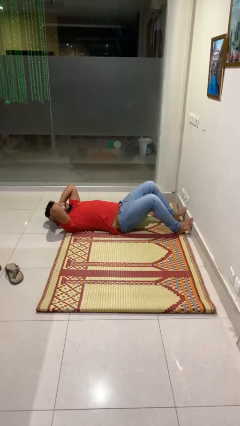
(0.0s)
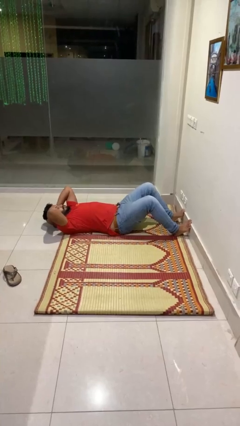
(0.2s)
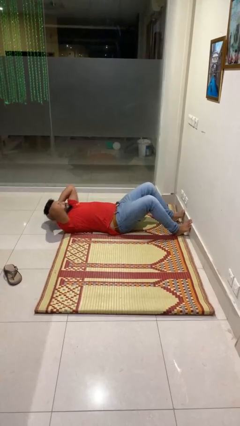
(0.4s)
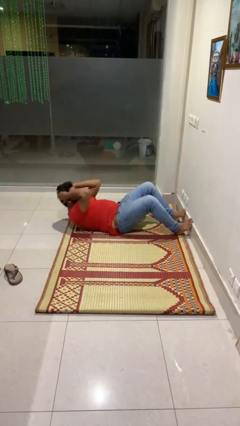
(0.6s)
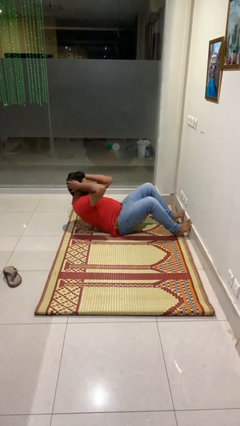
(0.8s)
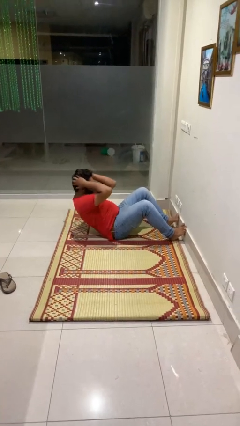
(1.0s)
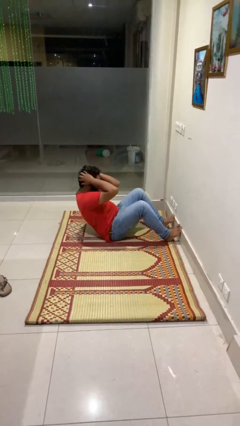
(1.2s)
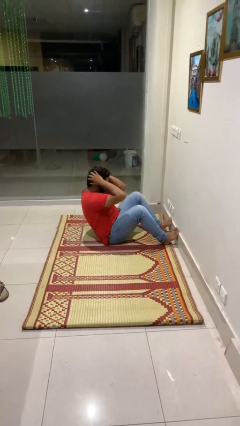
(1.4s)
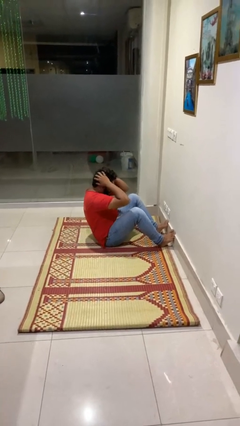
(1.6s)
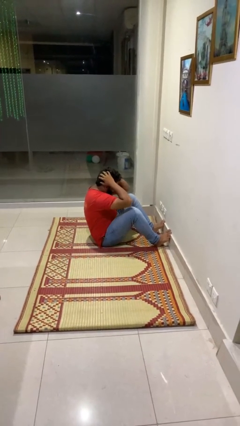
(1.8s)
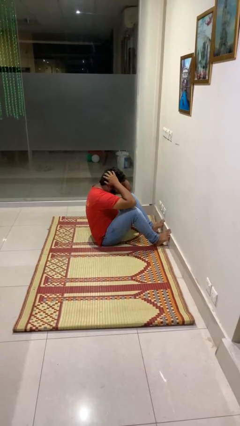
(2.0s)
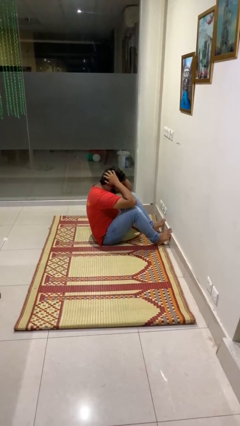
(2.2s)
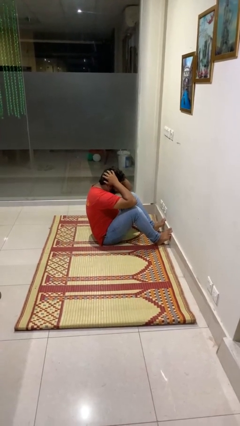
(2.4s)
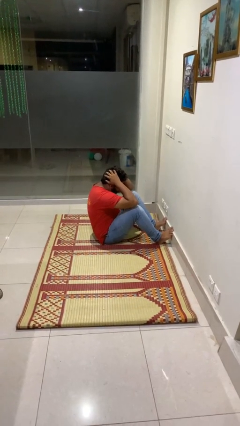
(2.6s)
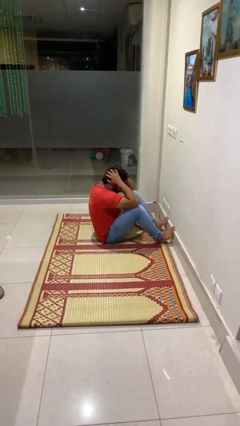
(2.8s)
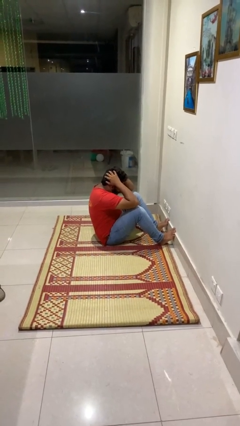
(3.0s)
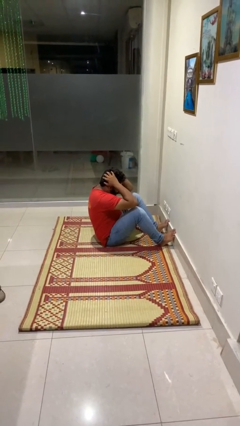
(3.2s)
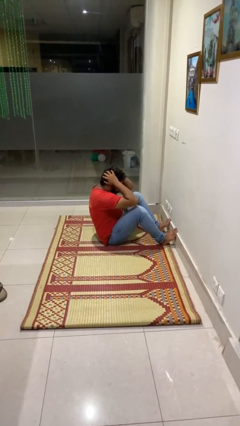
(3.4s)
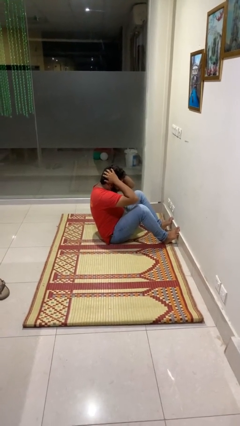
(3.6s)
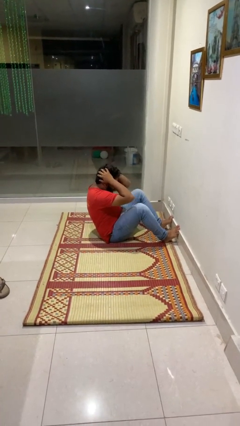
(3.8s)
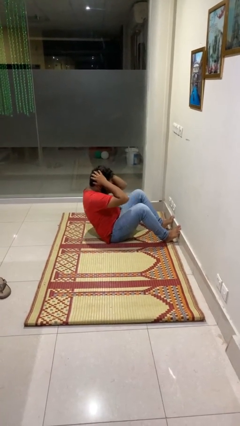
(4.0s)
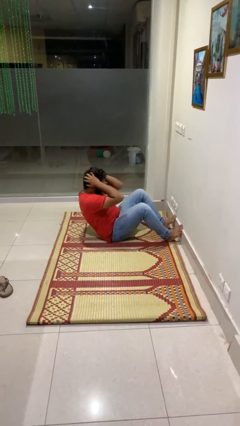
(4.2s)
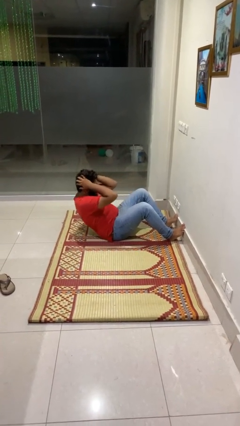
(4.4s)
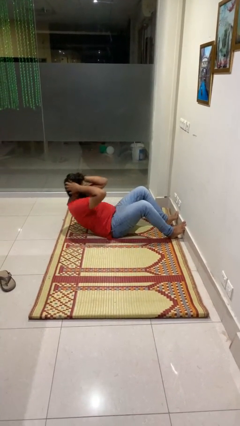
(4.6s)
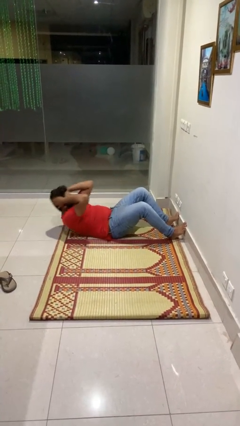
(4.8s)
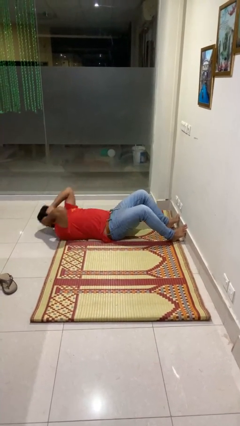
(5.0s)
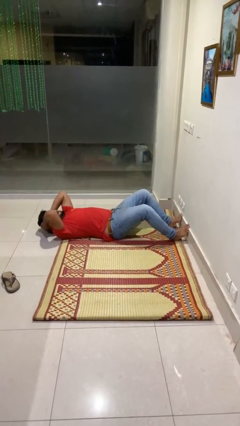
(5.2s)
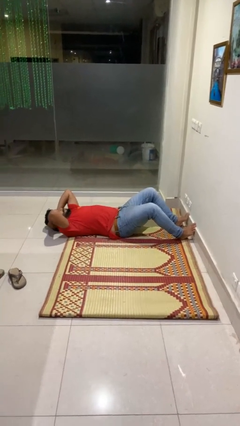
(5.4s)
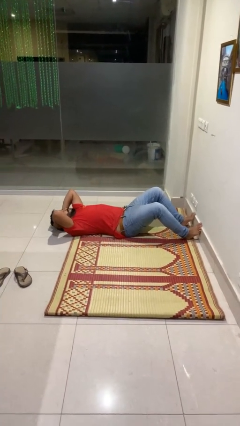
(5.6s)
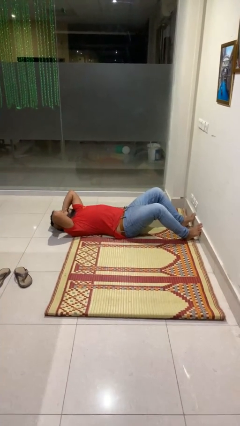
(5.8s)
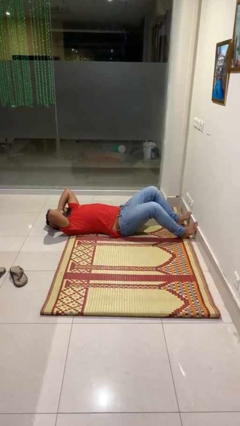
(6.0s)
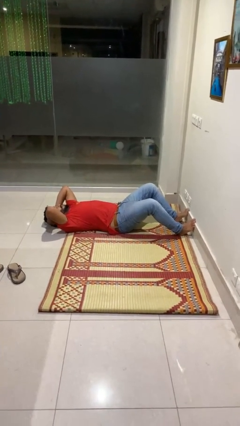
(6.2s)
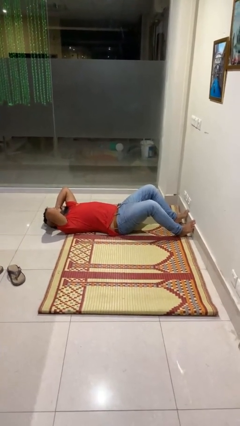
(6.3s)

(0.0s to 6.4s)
person exercises with situp

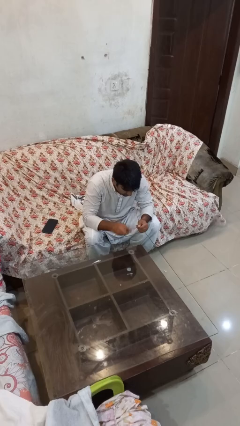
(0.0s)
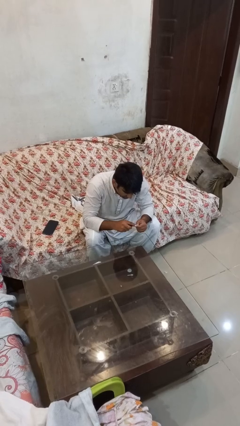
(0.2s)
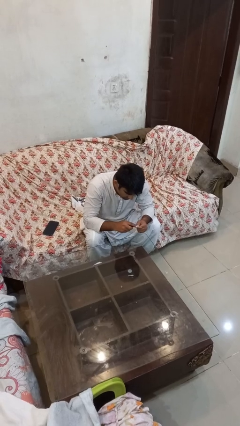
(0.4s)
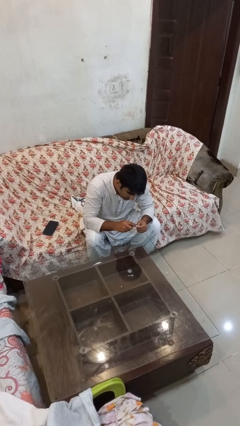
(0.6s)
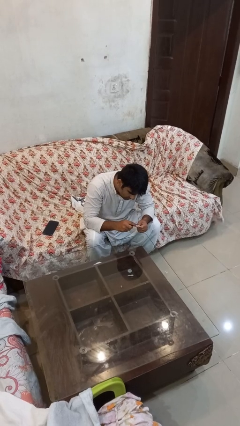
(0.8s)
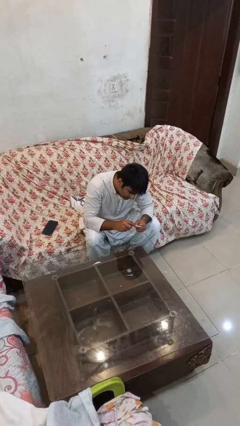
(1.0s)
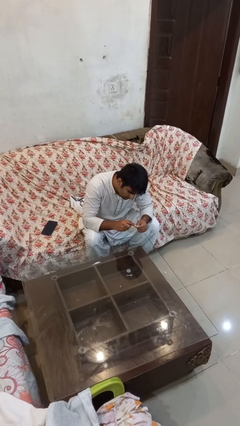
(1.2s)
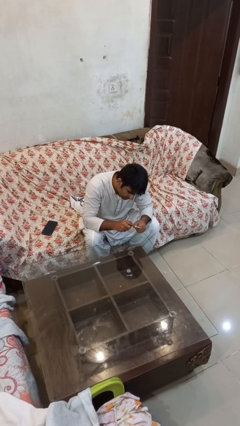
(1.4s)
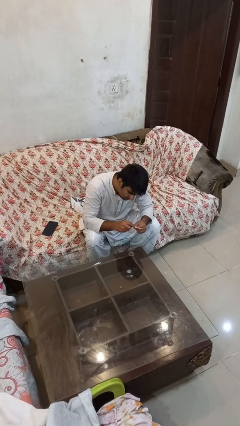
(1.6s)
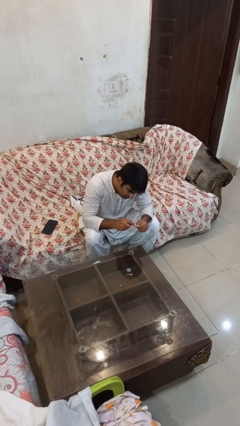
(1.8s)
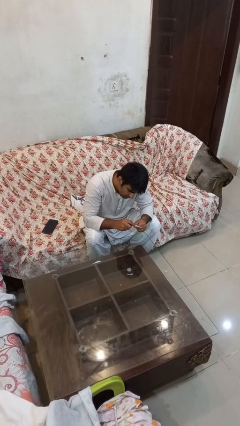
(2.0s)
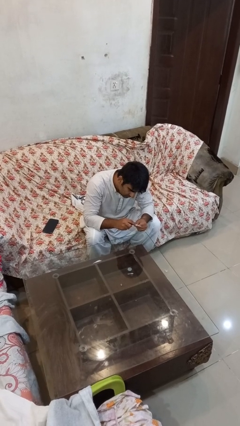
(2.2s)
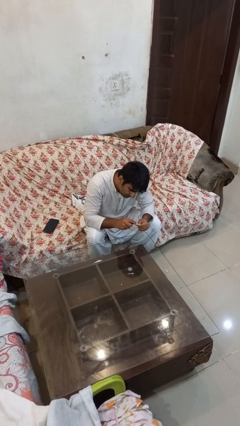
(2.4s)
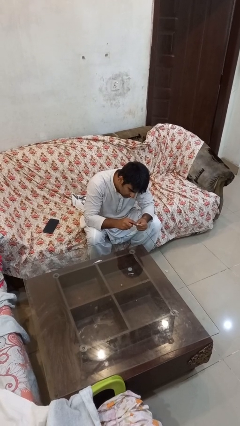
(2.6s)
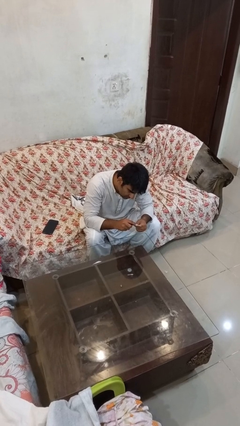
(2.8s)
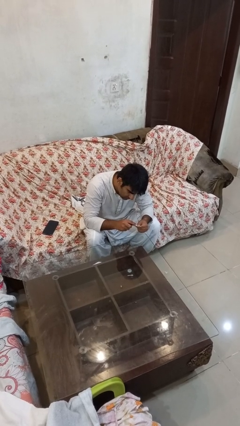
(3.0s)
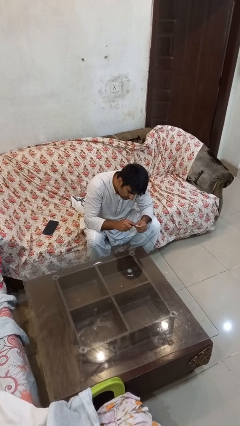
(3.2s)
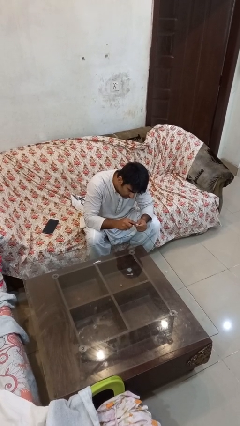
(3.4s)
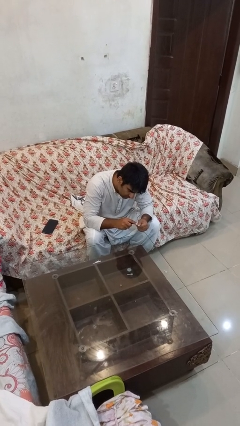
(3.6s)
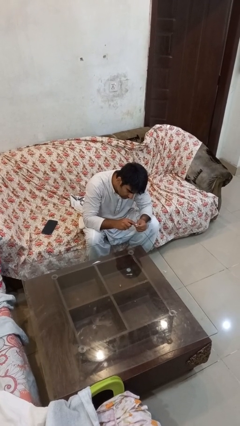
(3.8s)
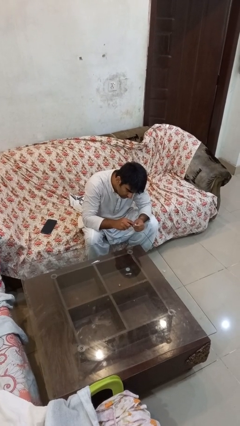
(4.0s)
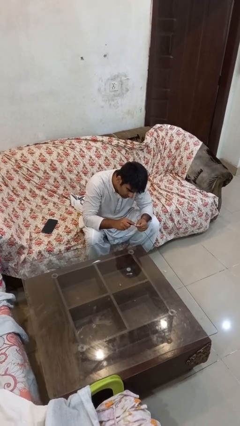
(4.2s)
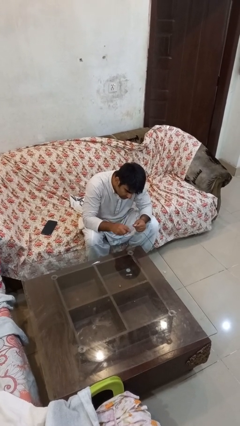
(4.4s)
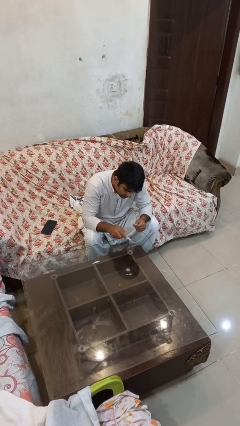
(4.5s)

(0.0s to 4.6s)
person files fingernails

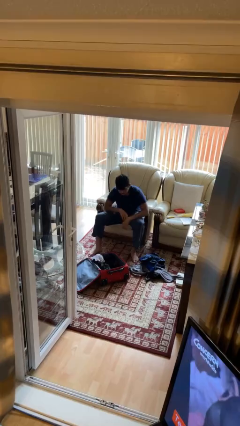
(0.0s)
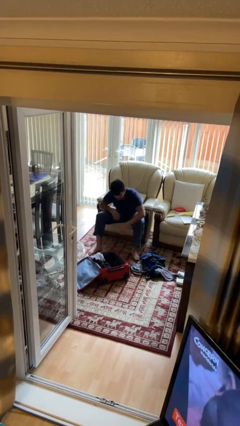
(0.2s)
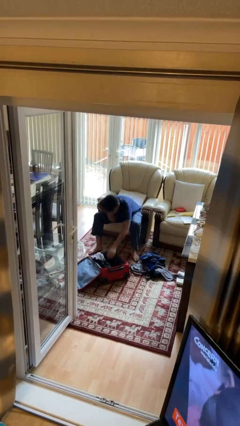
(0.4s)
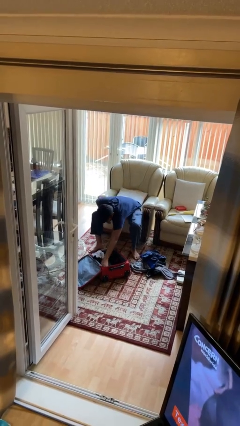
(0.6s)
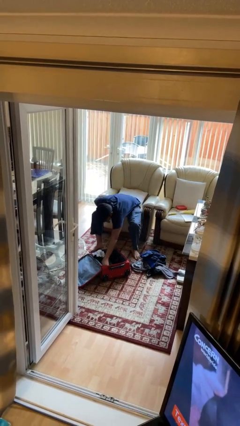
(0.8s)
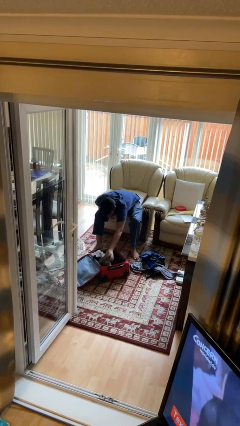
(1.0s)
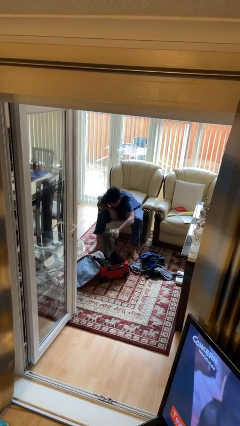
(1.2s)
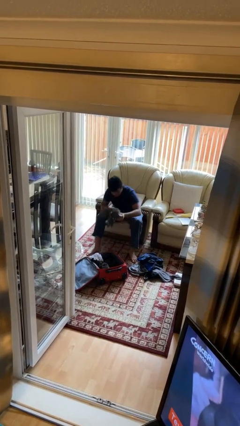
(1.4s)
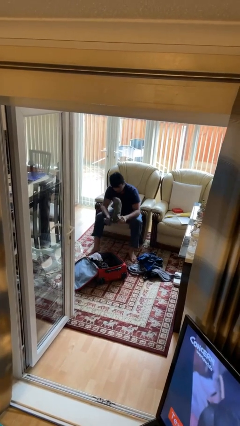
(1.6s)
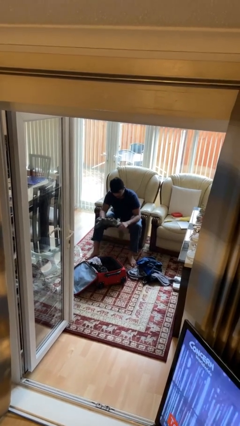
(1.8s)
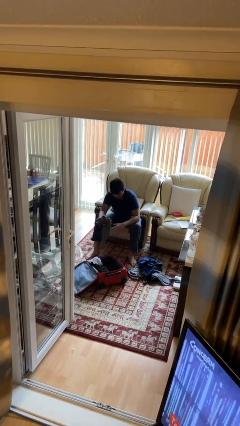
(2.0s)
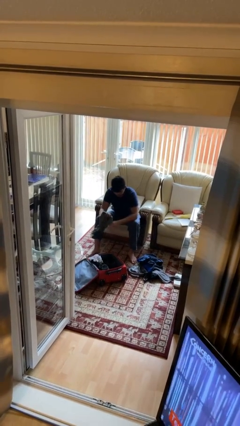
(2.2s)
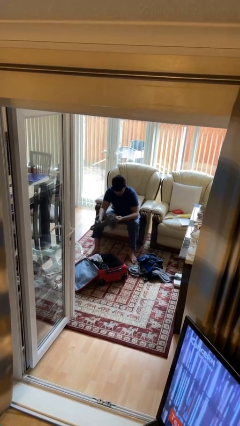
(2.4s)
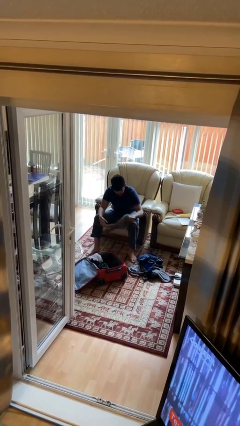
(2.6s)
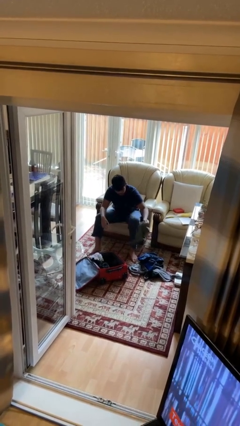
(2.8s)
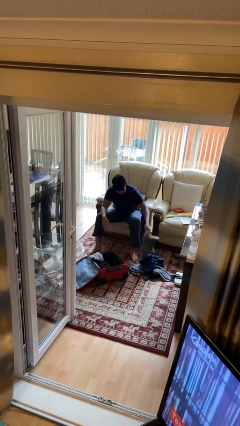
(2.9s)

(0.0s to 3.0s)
person unloads clothes from suitcase

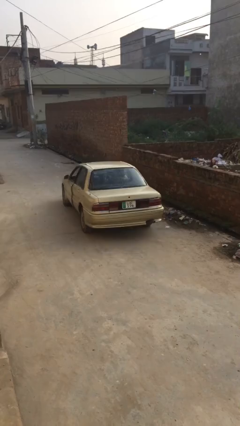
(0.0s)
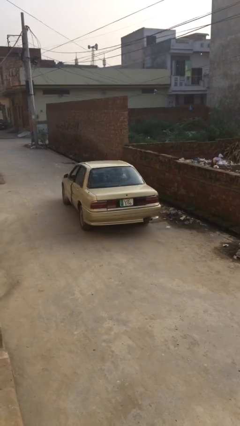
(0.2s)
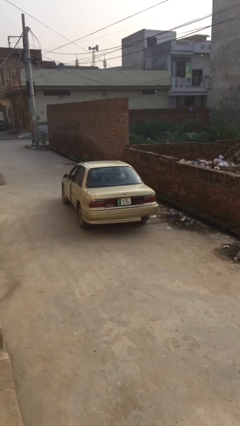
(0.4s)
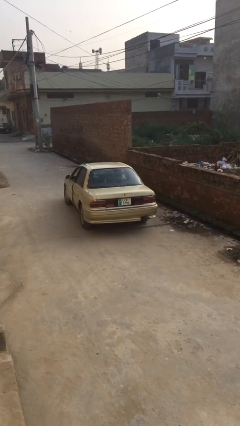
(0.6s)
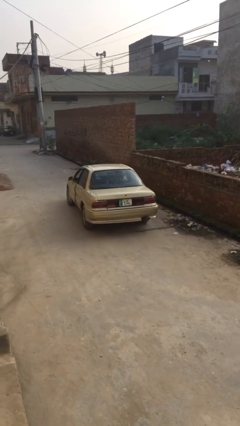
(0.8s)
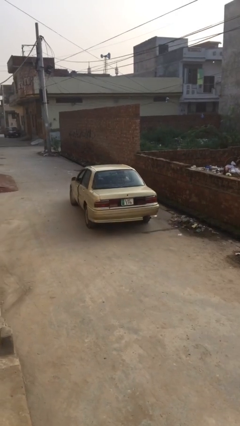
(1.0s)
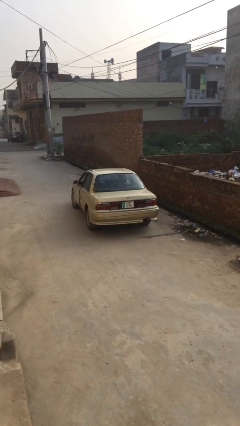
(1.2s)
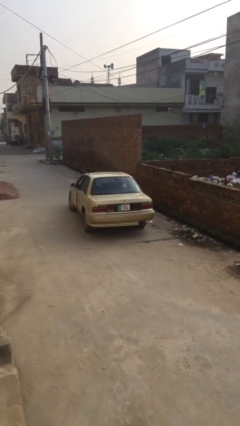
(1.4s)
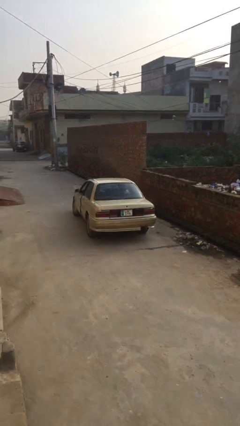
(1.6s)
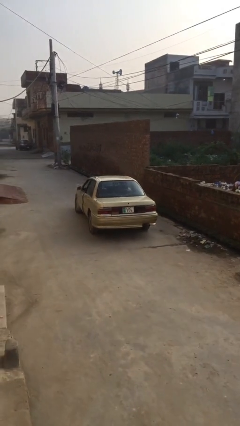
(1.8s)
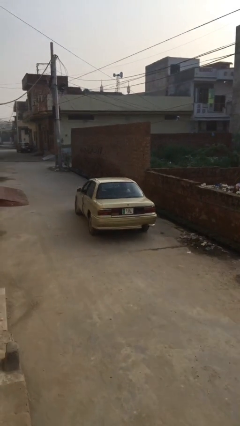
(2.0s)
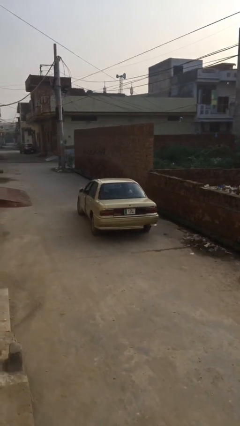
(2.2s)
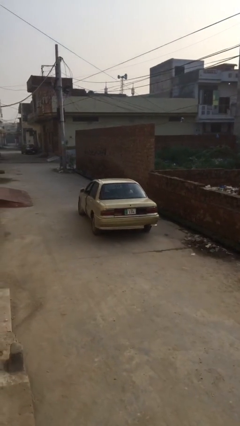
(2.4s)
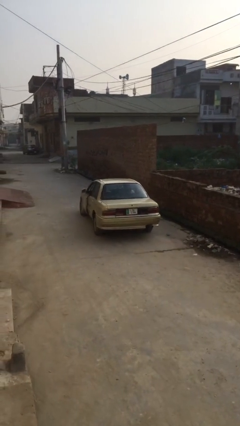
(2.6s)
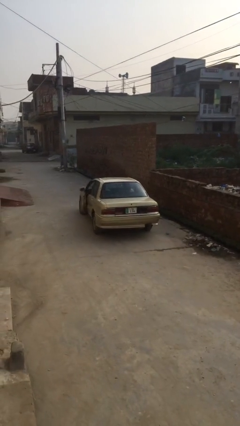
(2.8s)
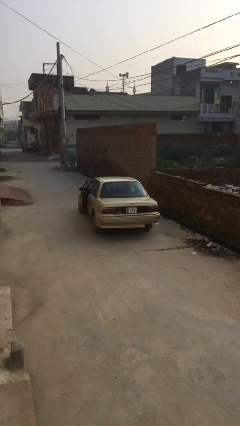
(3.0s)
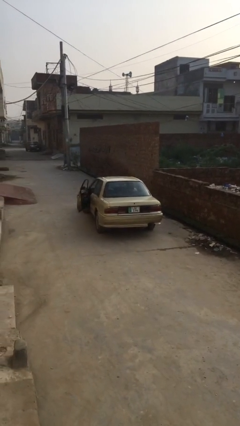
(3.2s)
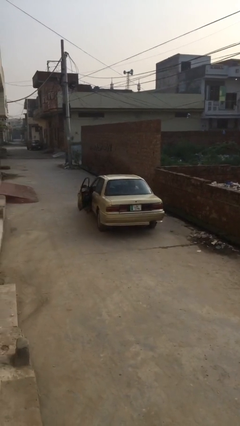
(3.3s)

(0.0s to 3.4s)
car drops off person

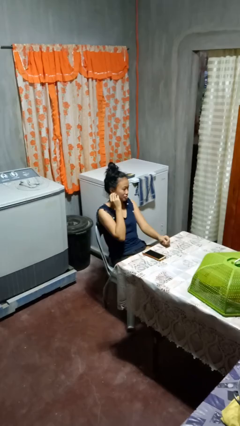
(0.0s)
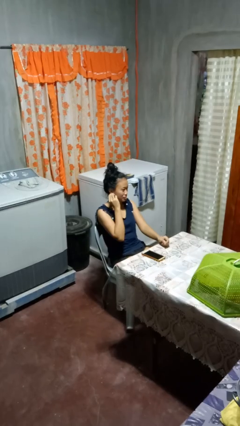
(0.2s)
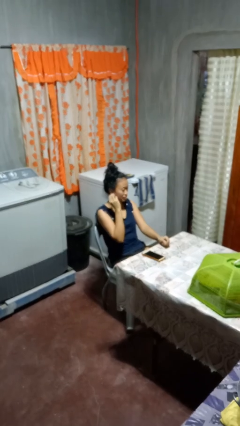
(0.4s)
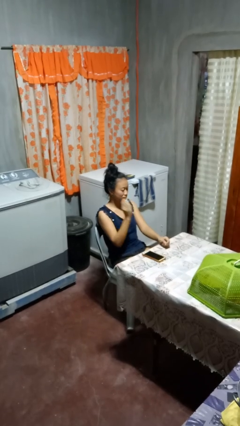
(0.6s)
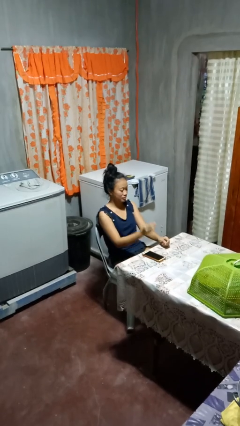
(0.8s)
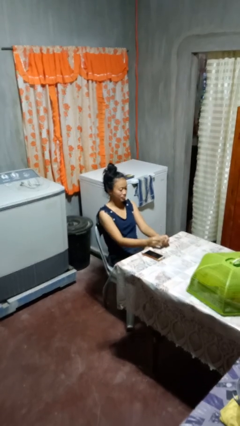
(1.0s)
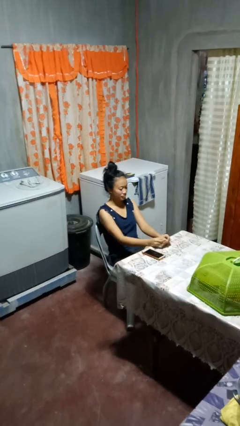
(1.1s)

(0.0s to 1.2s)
person takes off earrings
